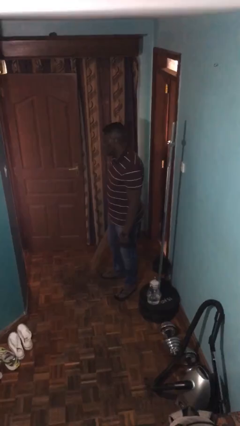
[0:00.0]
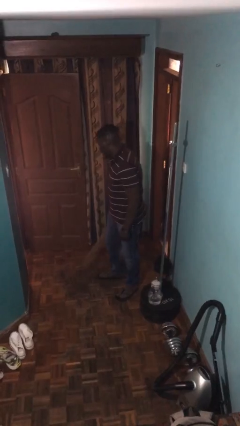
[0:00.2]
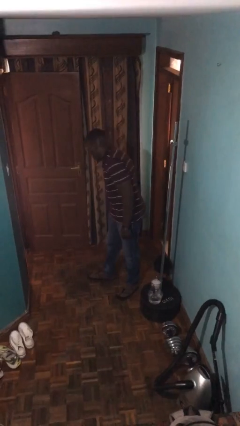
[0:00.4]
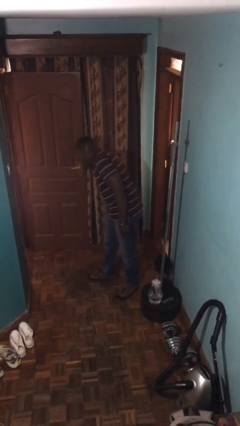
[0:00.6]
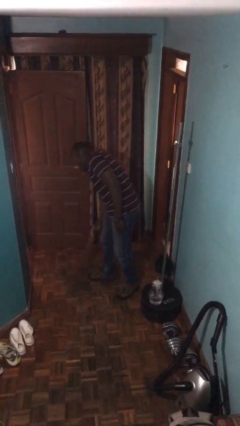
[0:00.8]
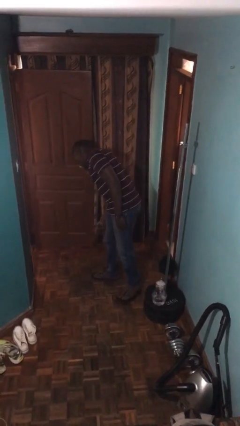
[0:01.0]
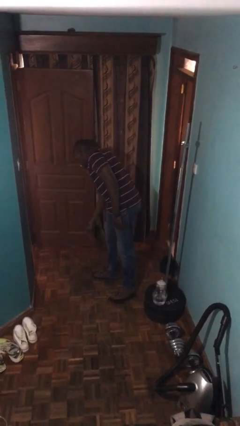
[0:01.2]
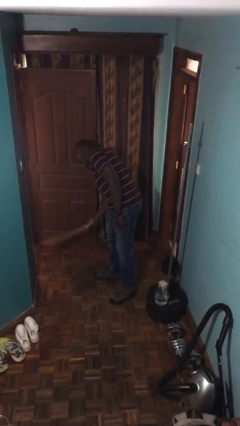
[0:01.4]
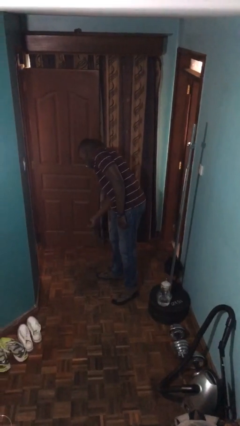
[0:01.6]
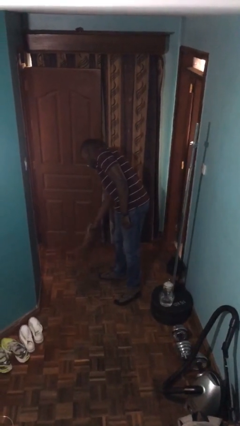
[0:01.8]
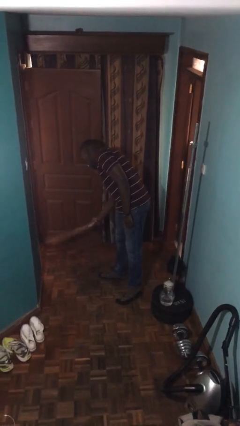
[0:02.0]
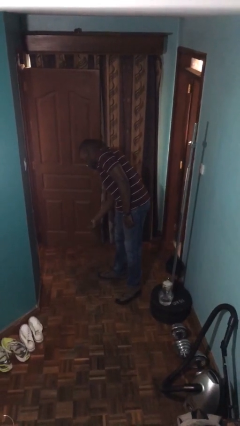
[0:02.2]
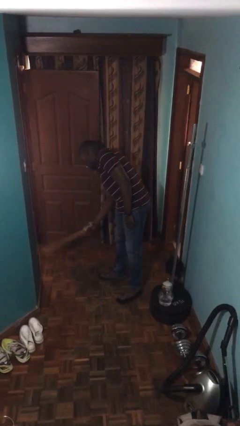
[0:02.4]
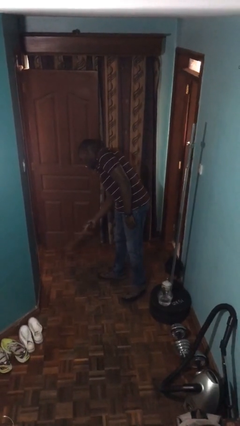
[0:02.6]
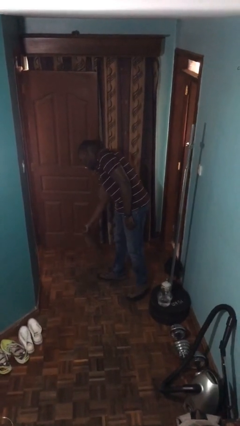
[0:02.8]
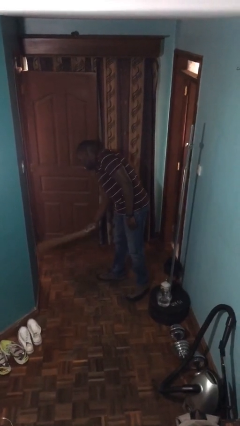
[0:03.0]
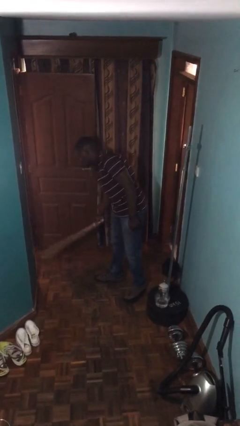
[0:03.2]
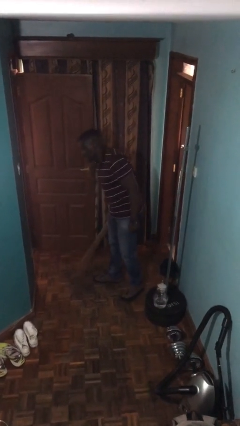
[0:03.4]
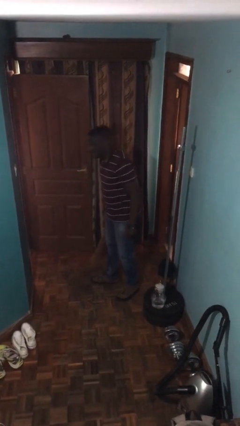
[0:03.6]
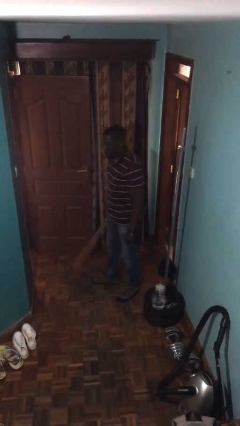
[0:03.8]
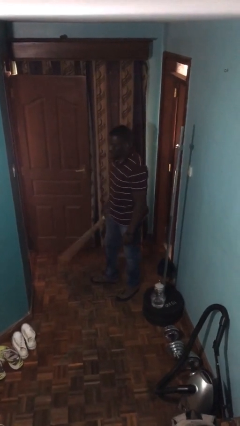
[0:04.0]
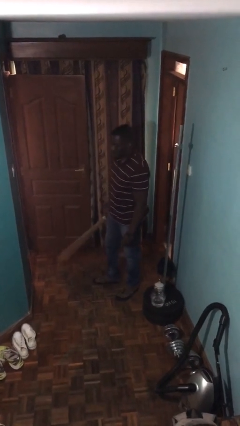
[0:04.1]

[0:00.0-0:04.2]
person sweeps floor

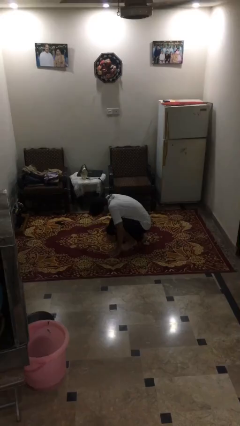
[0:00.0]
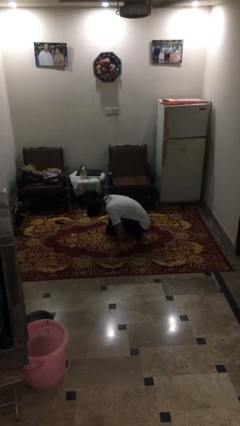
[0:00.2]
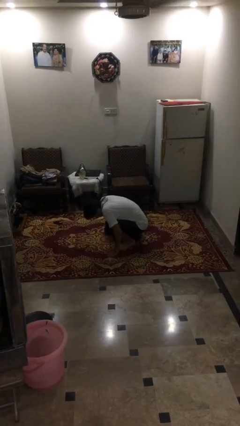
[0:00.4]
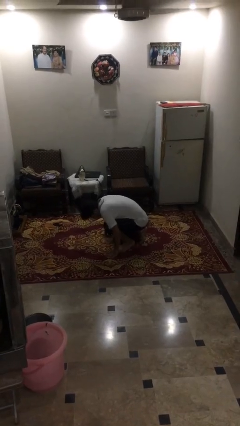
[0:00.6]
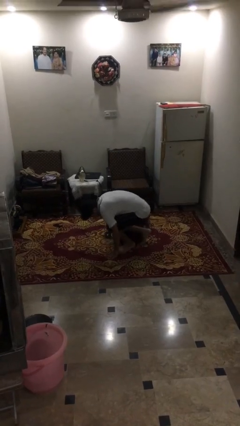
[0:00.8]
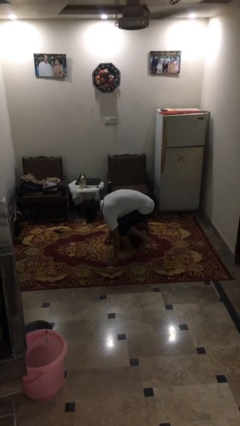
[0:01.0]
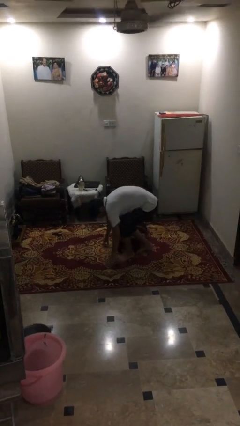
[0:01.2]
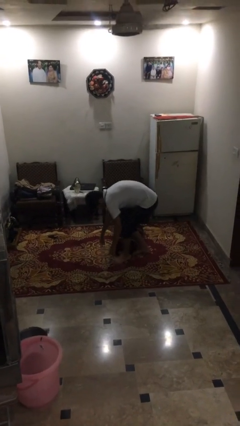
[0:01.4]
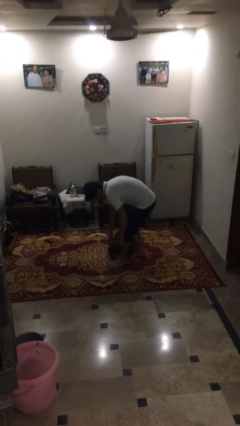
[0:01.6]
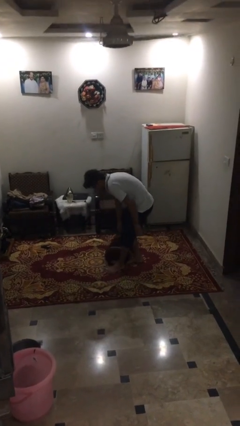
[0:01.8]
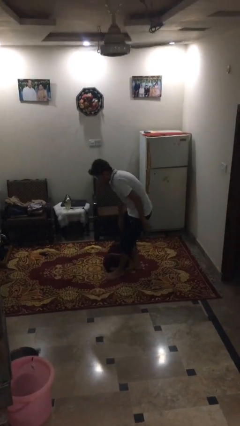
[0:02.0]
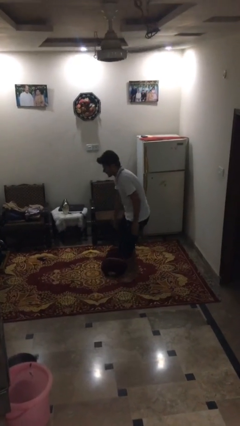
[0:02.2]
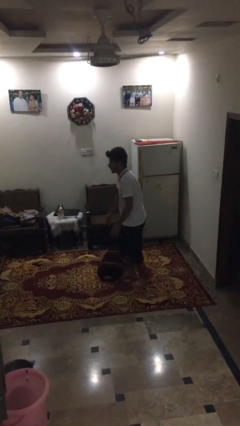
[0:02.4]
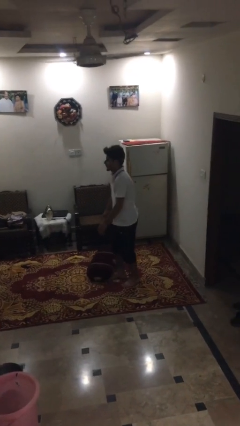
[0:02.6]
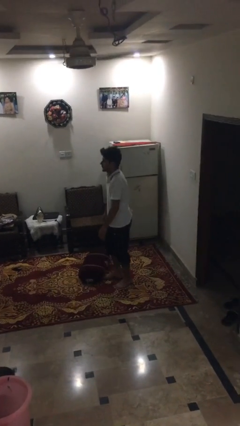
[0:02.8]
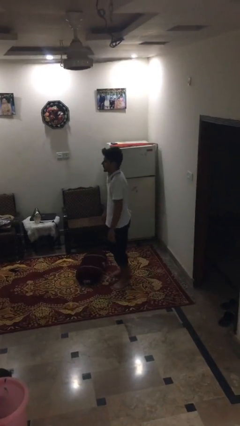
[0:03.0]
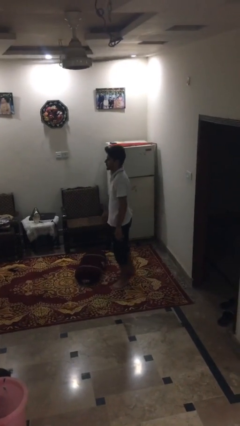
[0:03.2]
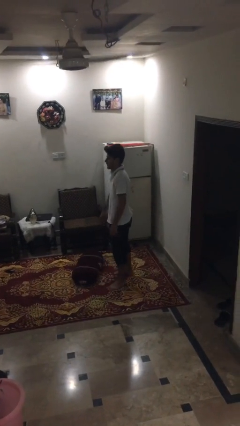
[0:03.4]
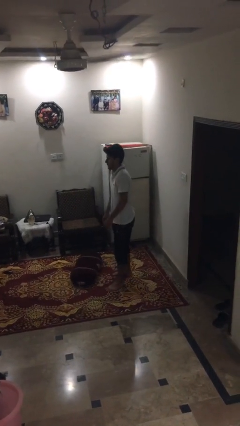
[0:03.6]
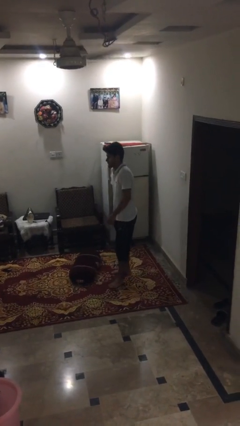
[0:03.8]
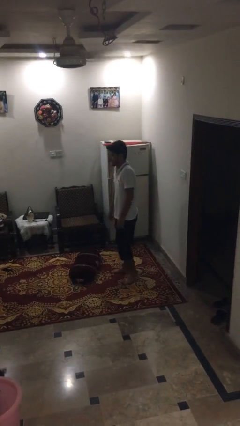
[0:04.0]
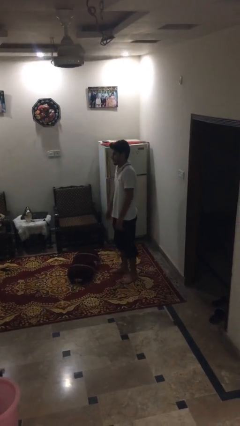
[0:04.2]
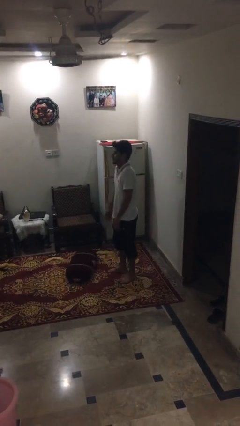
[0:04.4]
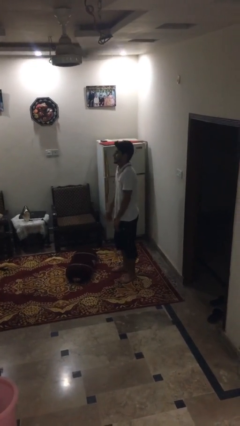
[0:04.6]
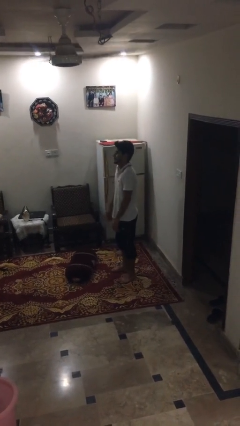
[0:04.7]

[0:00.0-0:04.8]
person stands up from floor

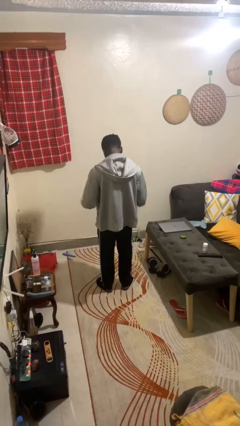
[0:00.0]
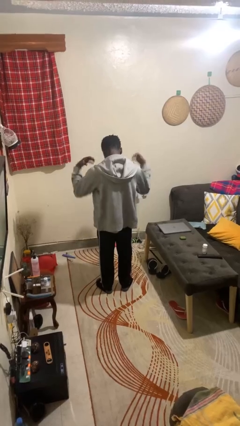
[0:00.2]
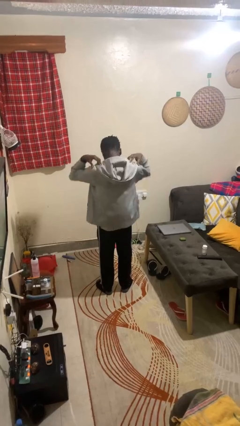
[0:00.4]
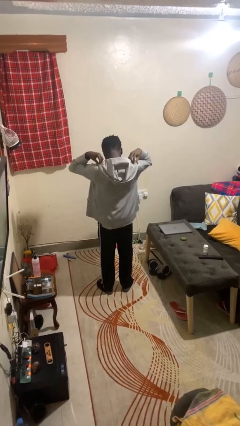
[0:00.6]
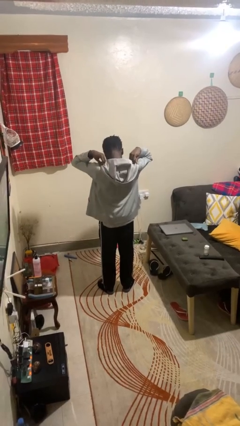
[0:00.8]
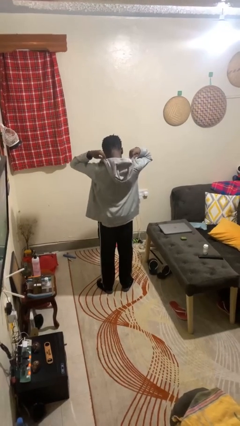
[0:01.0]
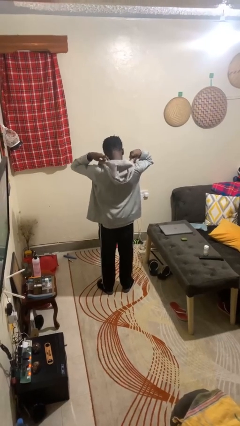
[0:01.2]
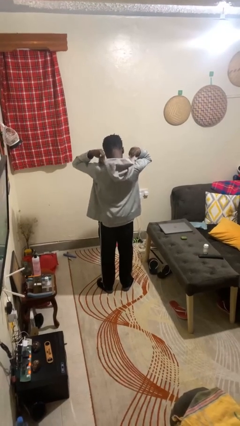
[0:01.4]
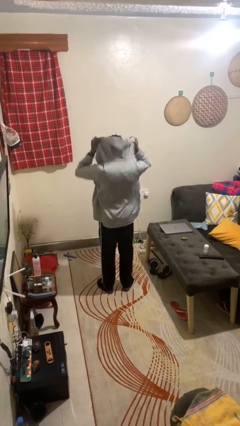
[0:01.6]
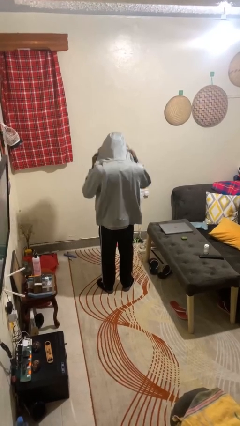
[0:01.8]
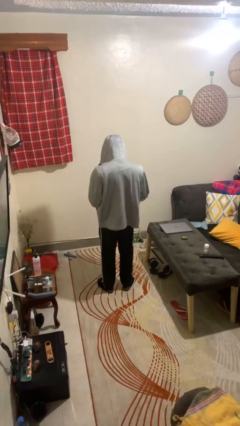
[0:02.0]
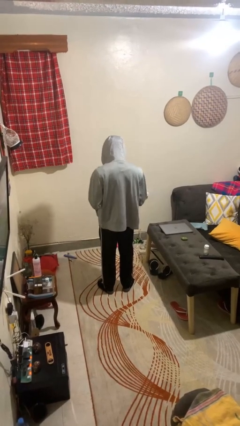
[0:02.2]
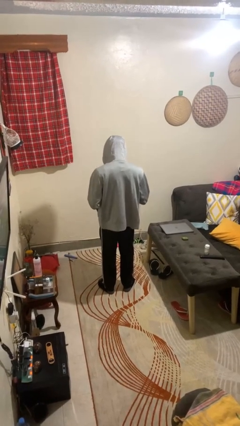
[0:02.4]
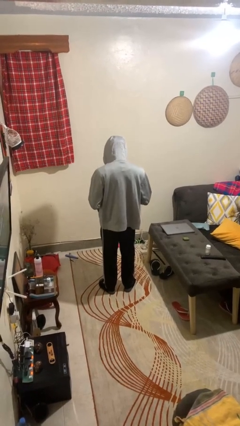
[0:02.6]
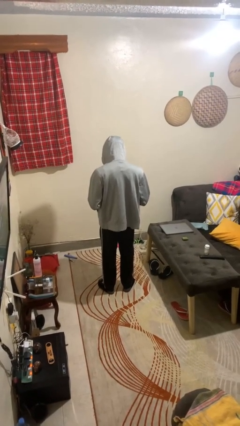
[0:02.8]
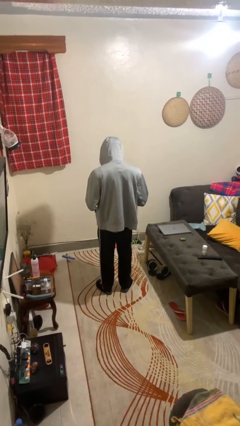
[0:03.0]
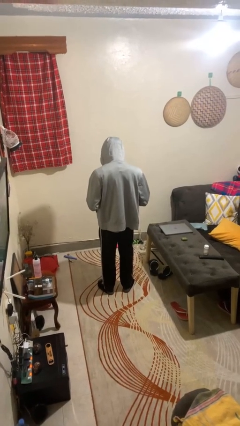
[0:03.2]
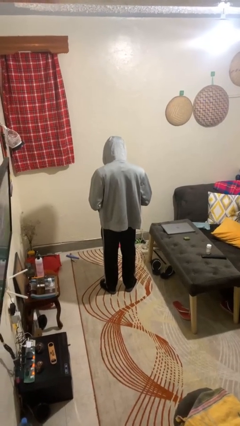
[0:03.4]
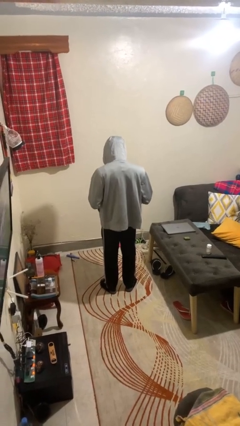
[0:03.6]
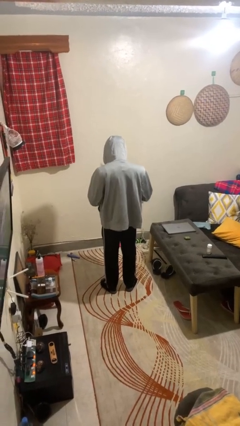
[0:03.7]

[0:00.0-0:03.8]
person puts on hoodie

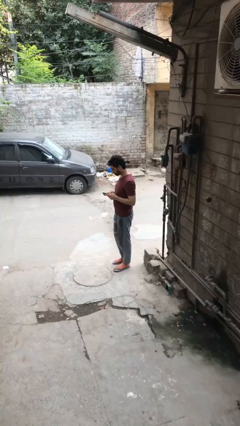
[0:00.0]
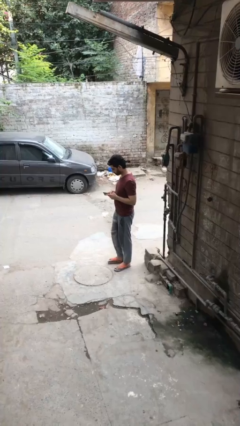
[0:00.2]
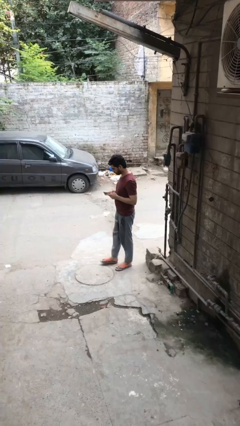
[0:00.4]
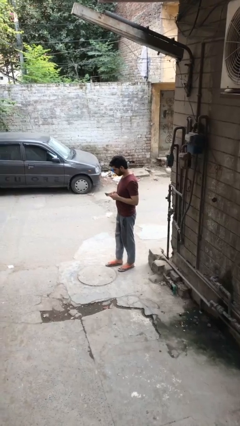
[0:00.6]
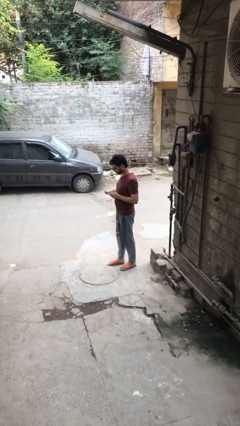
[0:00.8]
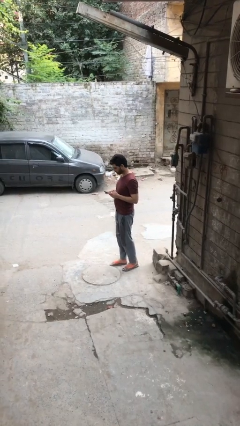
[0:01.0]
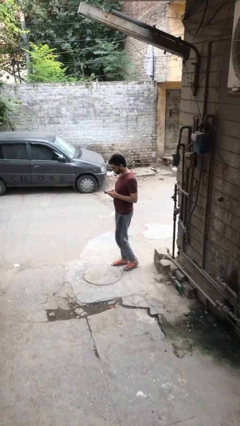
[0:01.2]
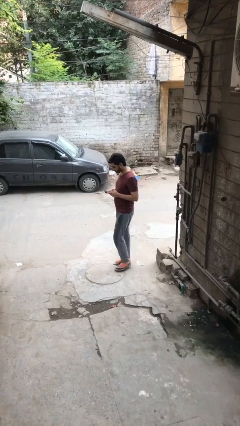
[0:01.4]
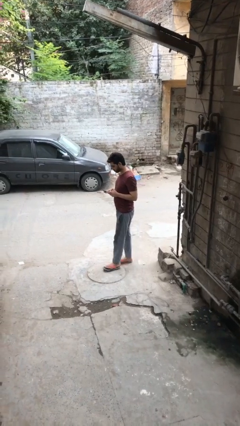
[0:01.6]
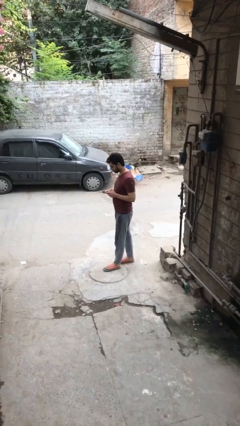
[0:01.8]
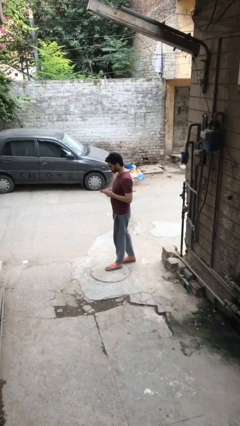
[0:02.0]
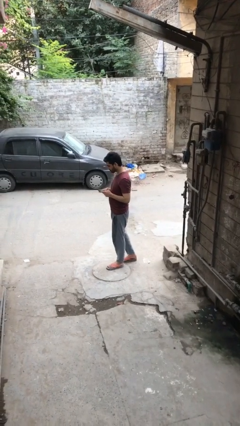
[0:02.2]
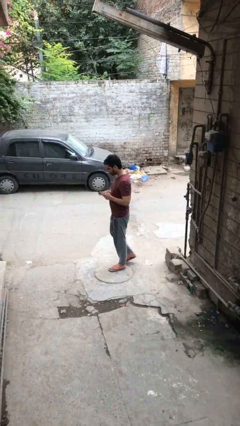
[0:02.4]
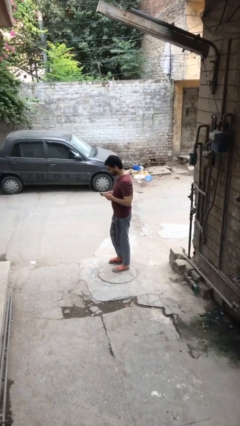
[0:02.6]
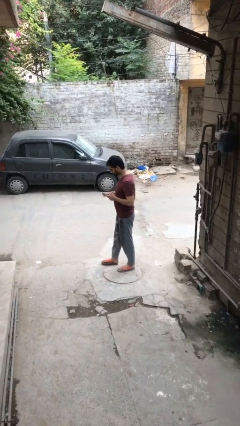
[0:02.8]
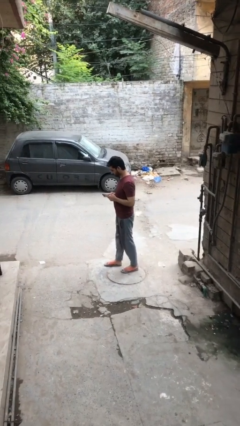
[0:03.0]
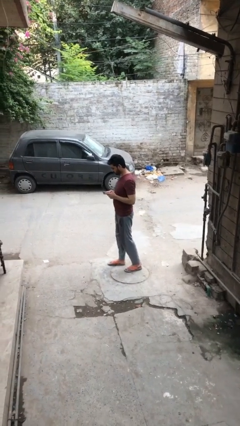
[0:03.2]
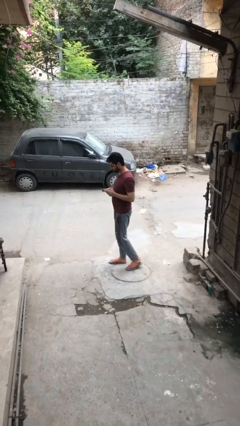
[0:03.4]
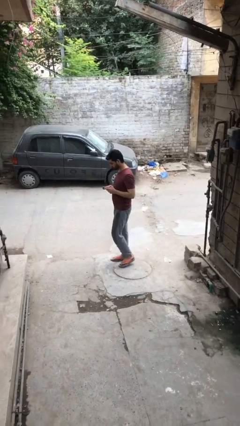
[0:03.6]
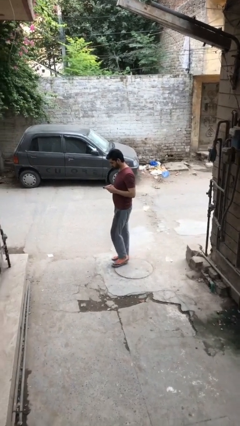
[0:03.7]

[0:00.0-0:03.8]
person texts on phone

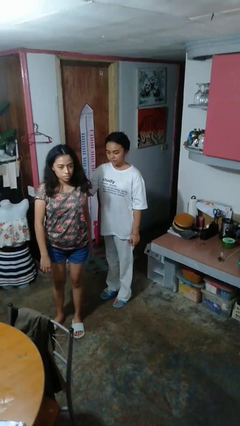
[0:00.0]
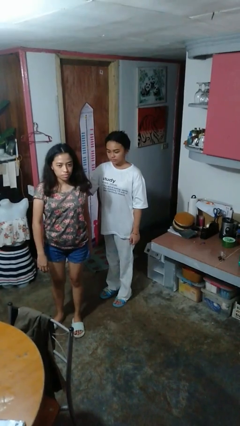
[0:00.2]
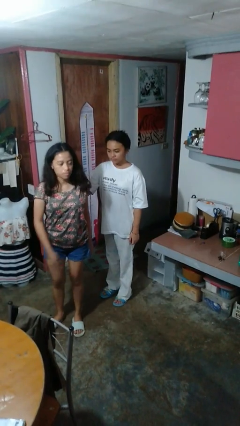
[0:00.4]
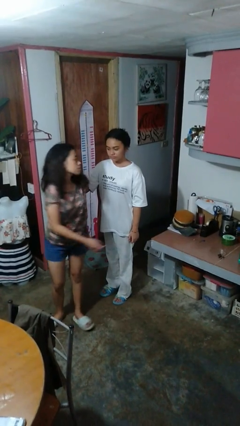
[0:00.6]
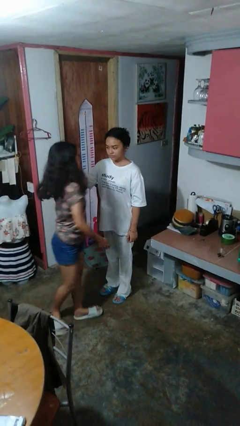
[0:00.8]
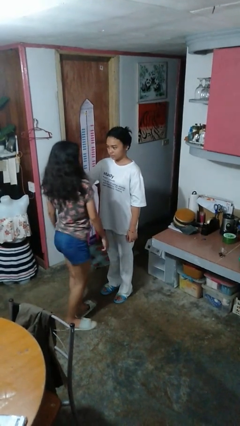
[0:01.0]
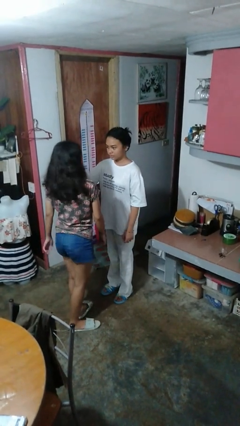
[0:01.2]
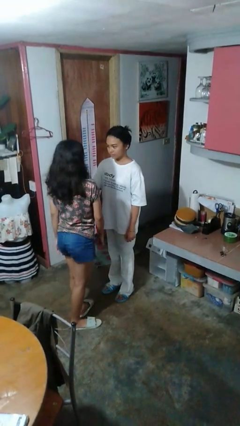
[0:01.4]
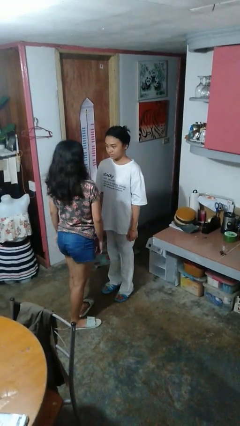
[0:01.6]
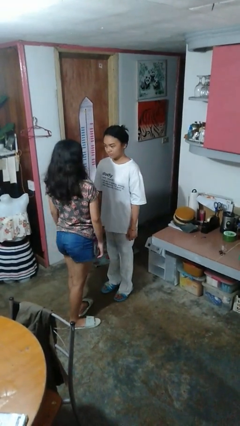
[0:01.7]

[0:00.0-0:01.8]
person spins person around
